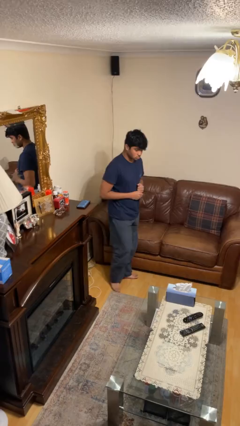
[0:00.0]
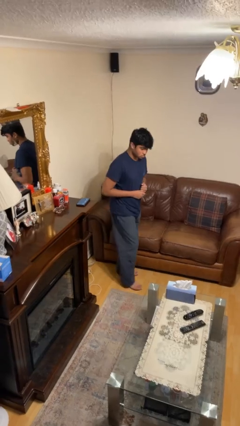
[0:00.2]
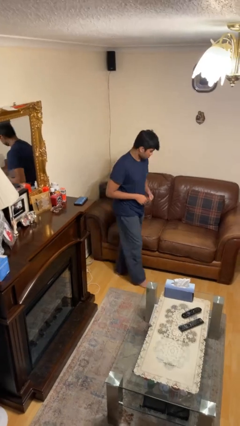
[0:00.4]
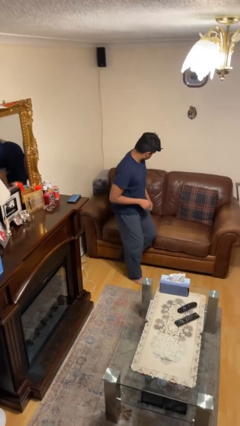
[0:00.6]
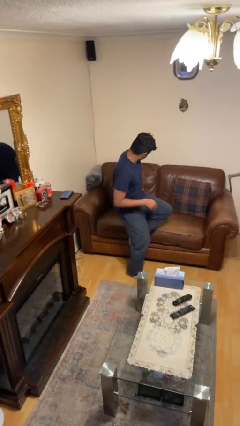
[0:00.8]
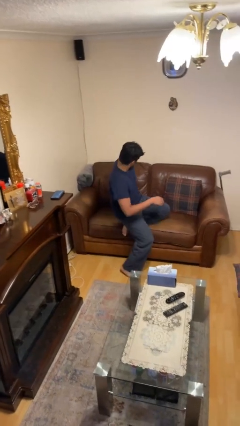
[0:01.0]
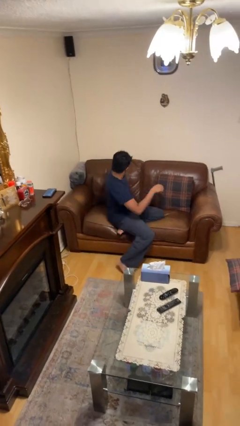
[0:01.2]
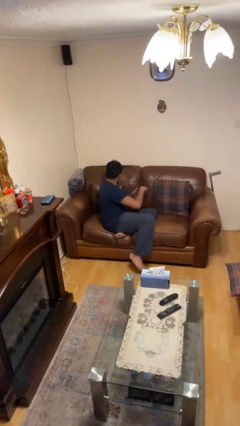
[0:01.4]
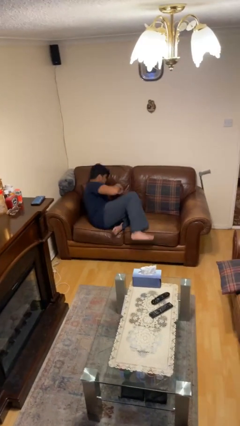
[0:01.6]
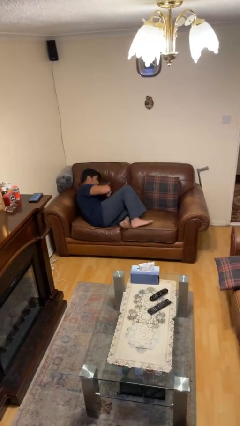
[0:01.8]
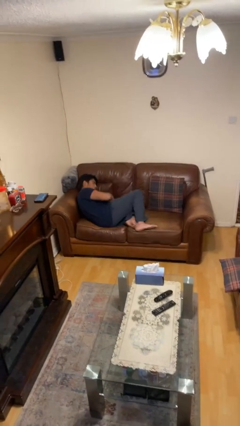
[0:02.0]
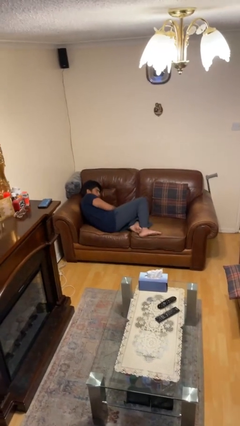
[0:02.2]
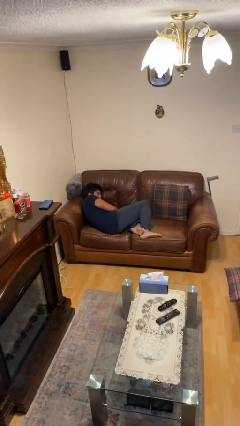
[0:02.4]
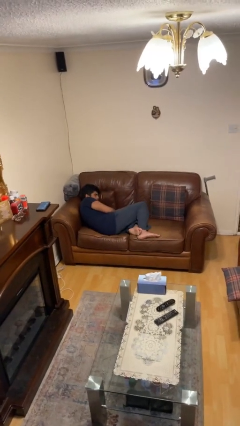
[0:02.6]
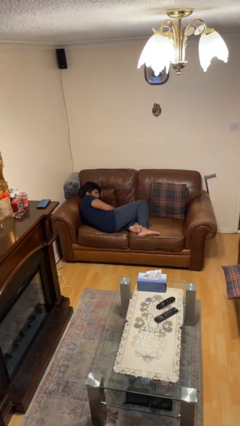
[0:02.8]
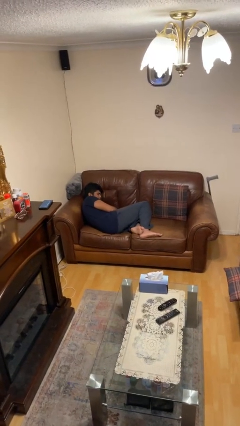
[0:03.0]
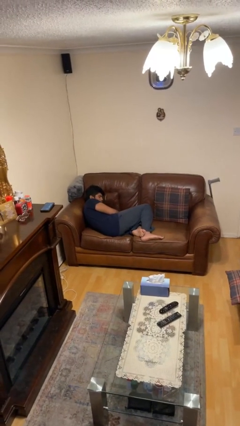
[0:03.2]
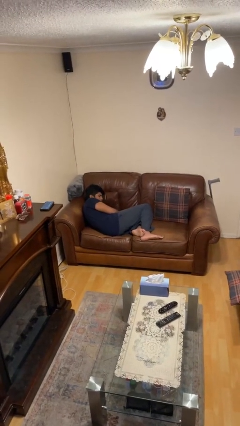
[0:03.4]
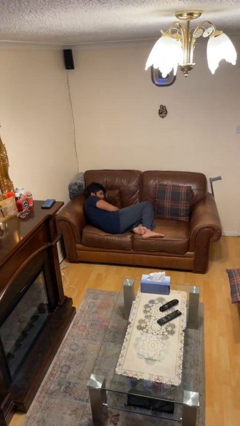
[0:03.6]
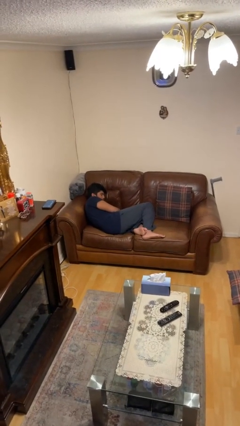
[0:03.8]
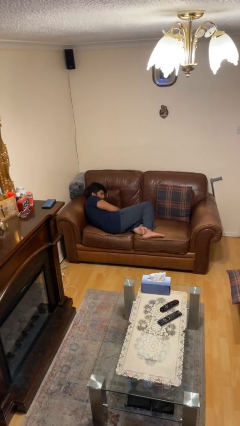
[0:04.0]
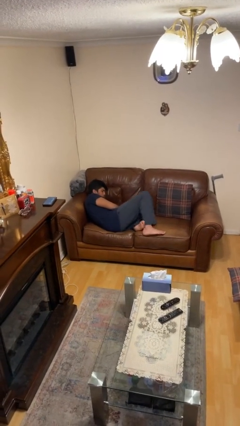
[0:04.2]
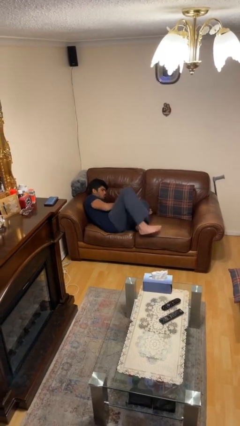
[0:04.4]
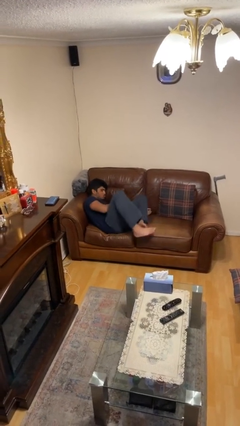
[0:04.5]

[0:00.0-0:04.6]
person lies down on couch

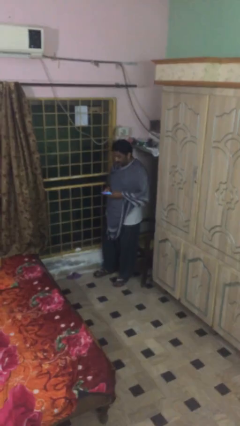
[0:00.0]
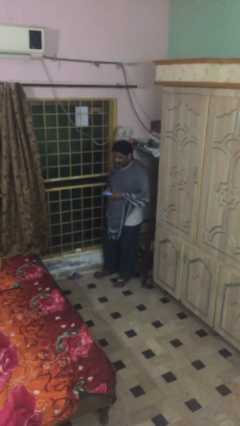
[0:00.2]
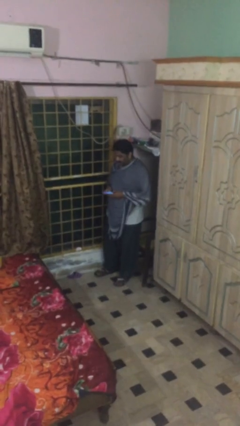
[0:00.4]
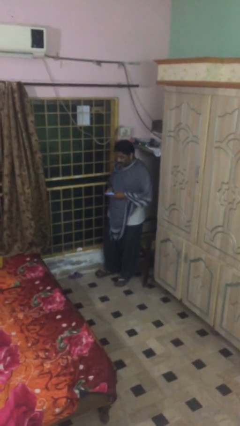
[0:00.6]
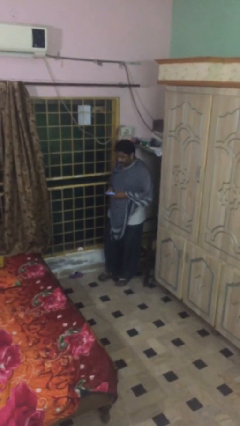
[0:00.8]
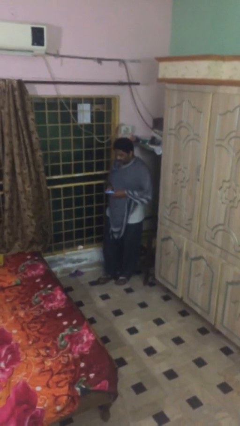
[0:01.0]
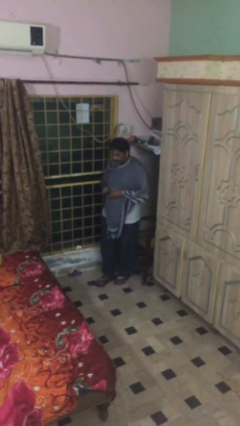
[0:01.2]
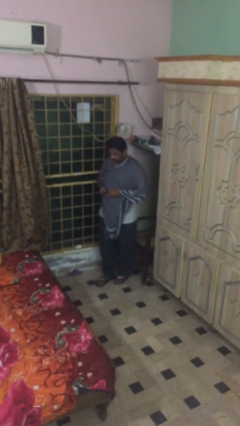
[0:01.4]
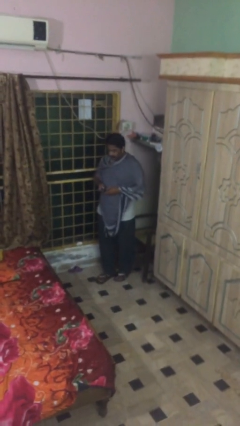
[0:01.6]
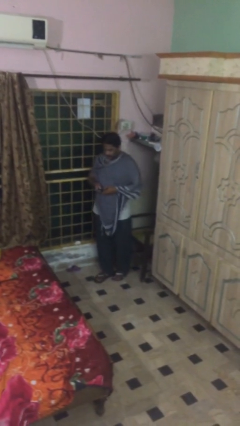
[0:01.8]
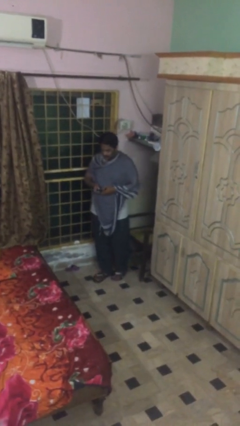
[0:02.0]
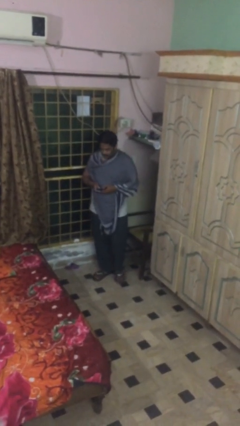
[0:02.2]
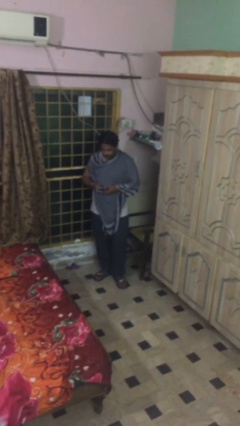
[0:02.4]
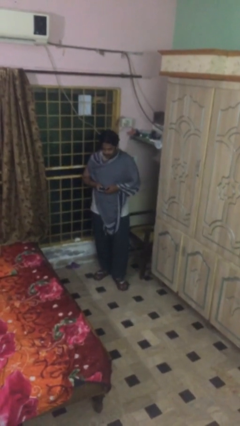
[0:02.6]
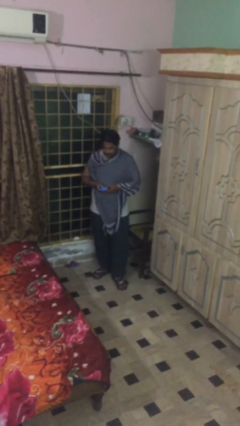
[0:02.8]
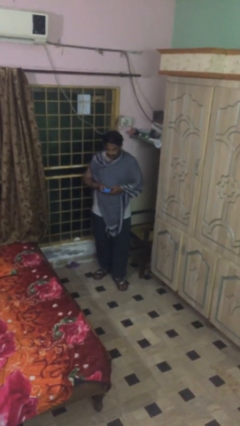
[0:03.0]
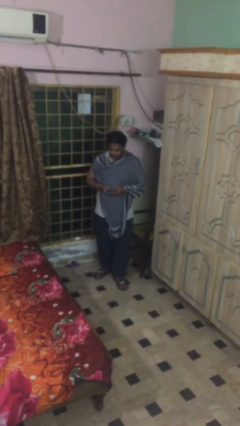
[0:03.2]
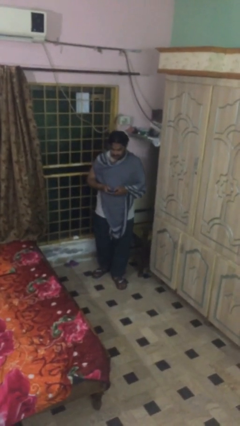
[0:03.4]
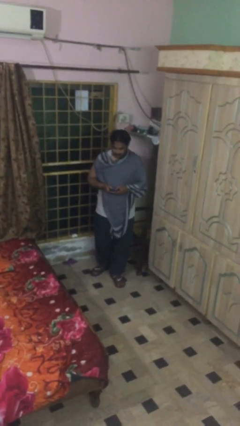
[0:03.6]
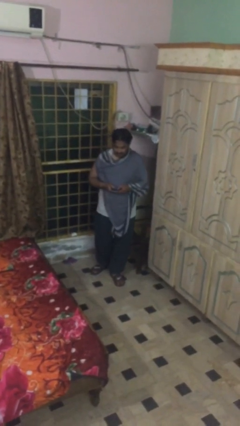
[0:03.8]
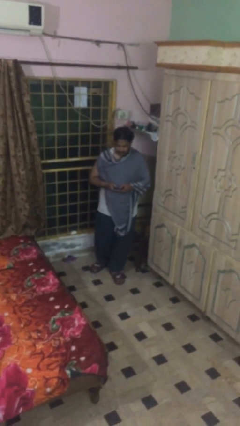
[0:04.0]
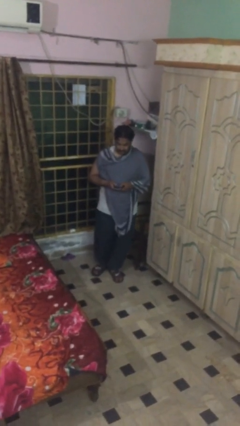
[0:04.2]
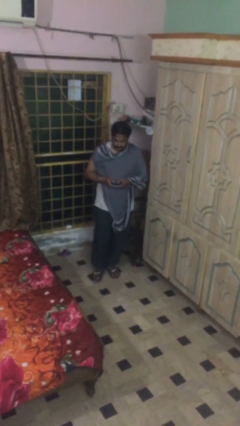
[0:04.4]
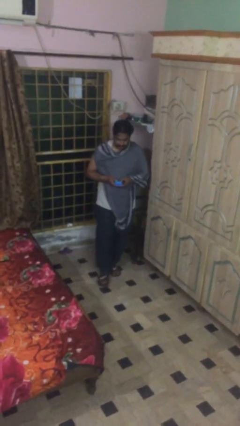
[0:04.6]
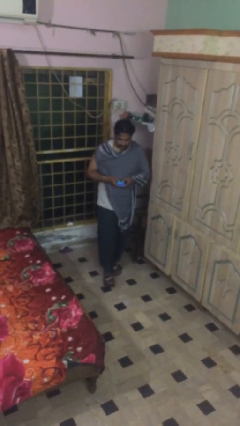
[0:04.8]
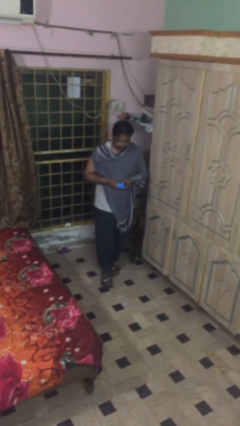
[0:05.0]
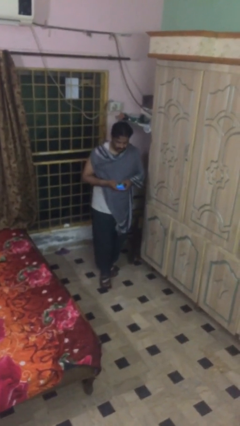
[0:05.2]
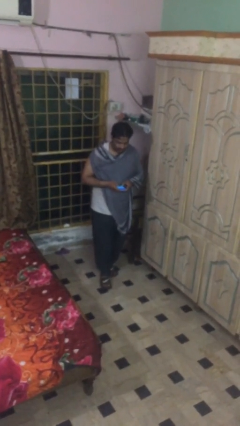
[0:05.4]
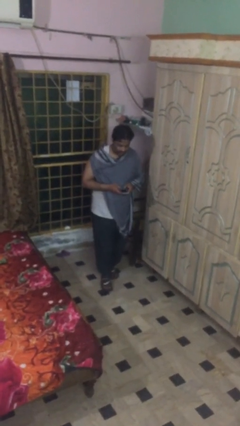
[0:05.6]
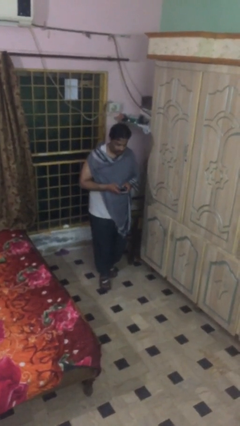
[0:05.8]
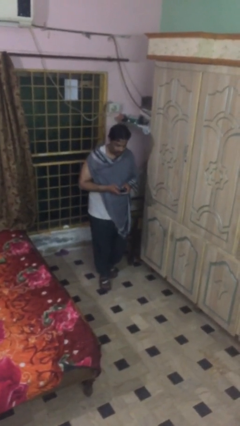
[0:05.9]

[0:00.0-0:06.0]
person texts on phone

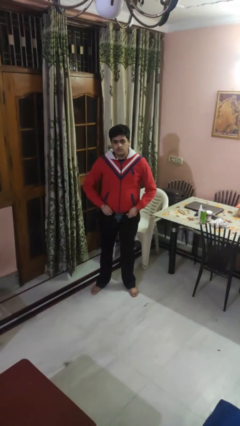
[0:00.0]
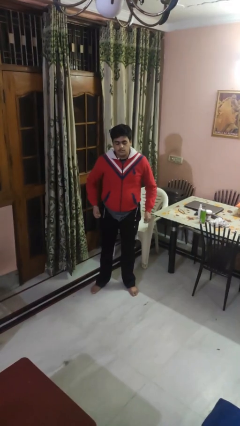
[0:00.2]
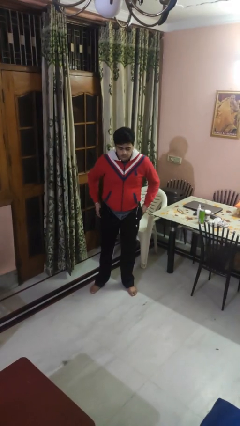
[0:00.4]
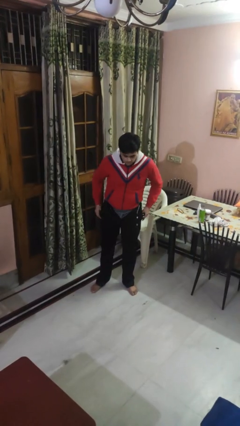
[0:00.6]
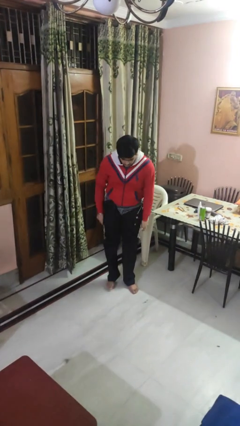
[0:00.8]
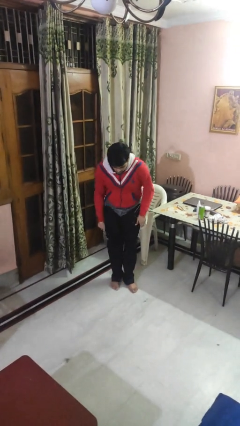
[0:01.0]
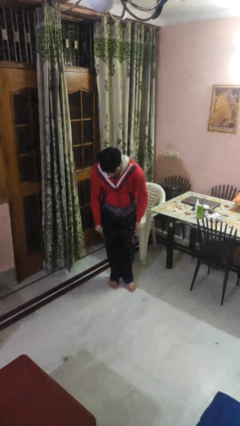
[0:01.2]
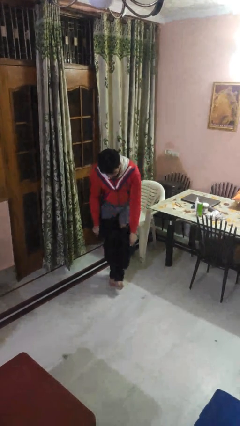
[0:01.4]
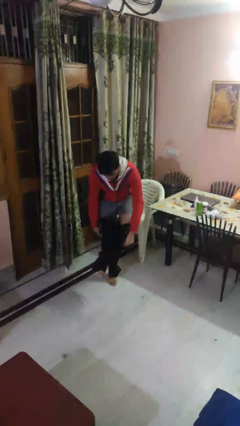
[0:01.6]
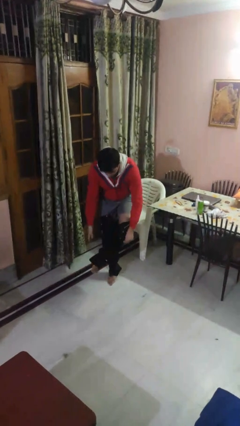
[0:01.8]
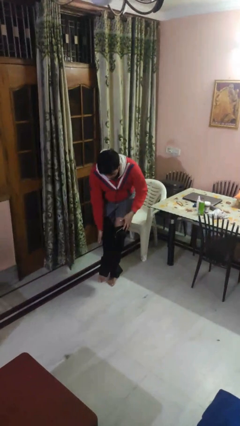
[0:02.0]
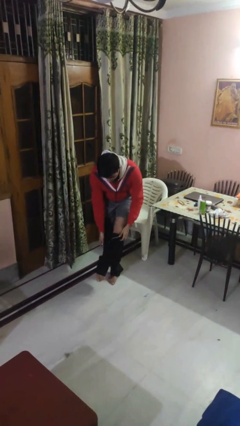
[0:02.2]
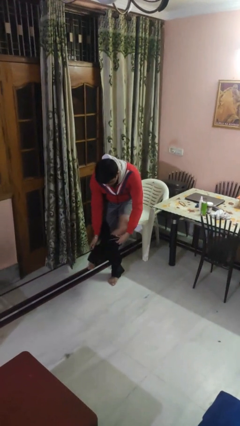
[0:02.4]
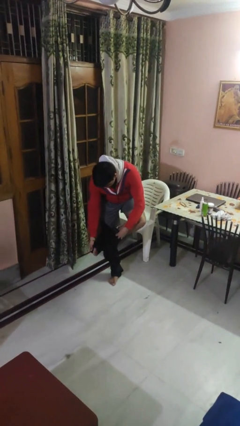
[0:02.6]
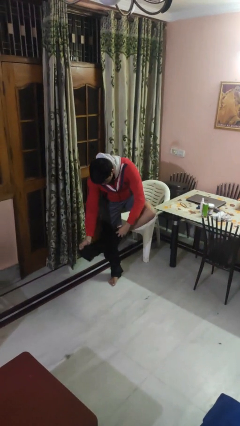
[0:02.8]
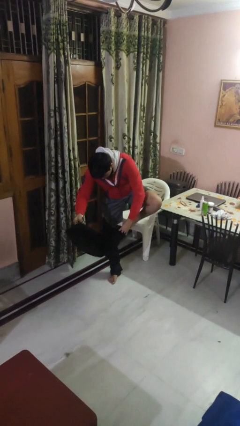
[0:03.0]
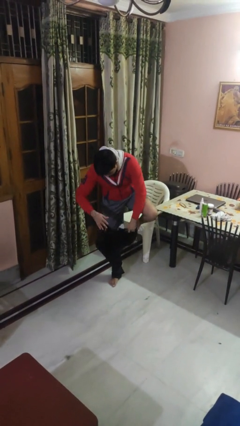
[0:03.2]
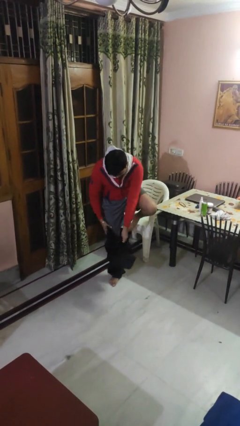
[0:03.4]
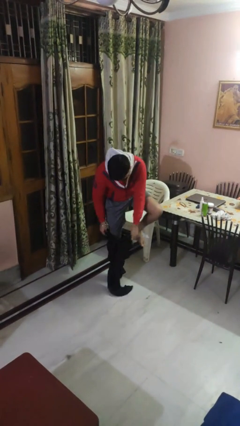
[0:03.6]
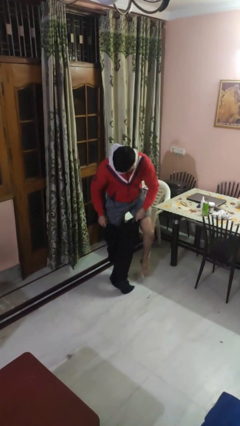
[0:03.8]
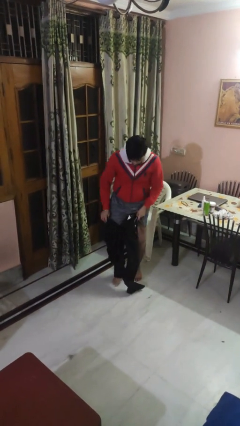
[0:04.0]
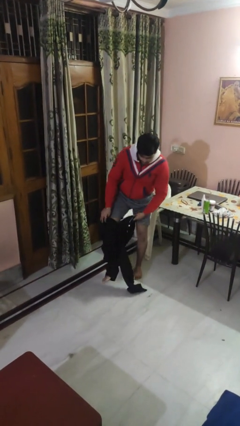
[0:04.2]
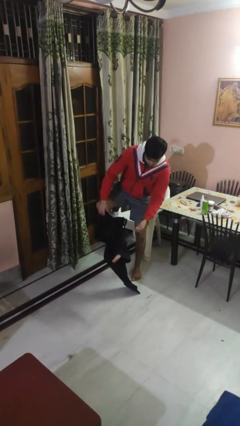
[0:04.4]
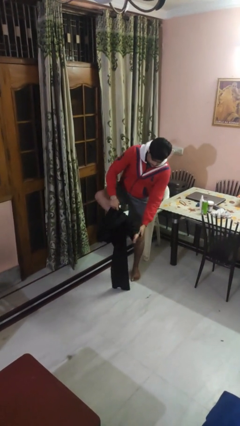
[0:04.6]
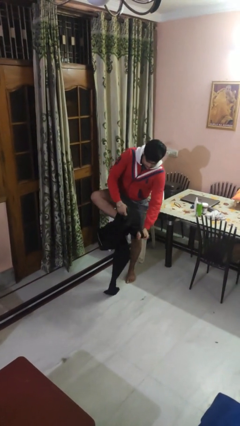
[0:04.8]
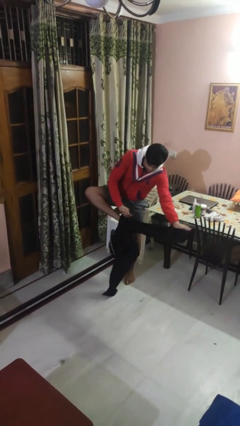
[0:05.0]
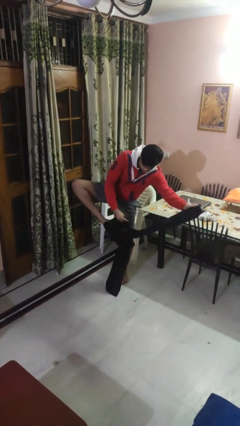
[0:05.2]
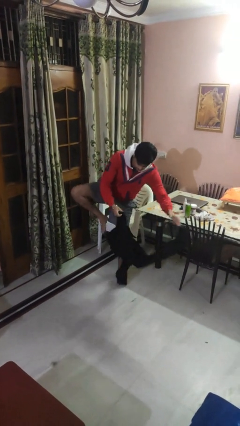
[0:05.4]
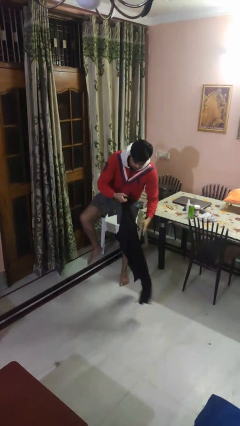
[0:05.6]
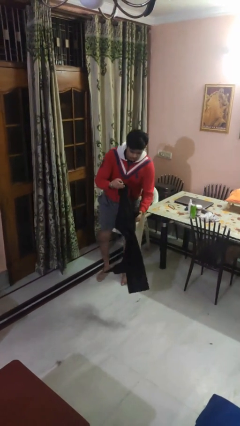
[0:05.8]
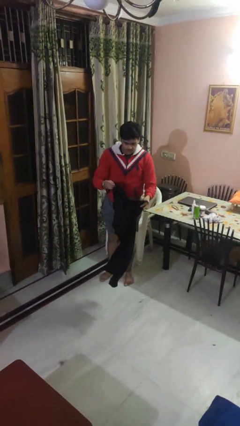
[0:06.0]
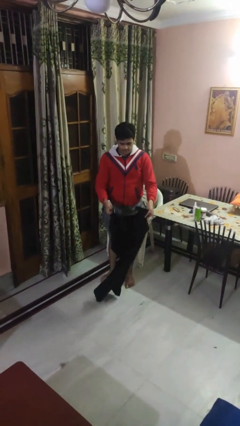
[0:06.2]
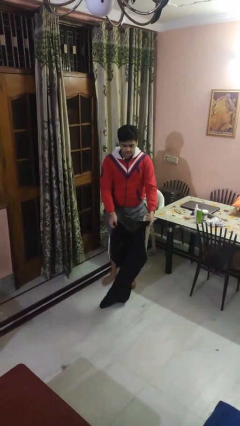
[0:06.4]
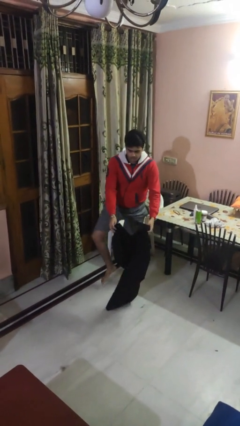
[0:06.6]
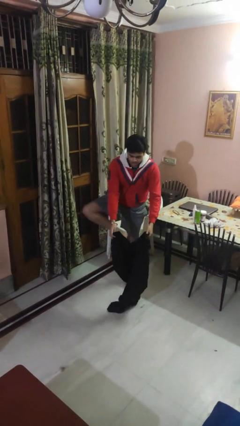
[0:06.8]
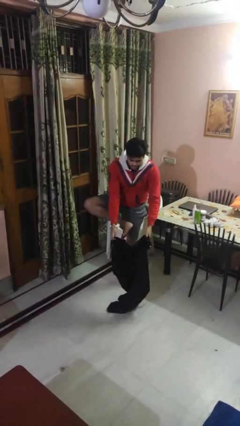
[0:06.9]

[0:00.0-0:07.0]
person takes off pants

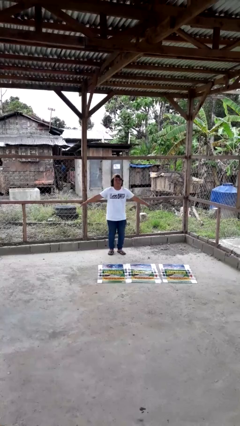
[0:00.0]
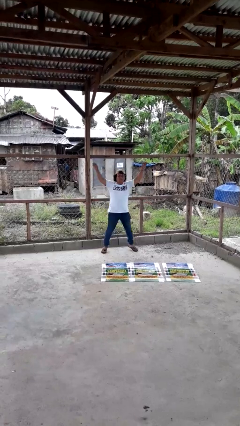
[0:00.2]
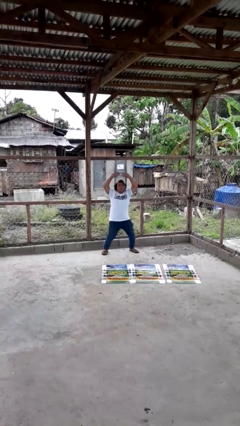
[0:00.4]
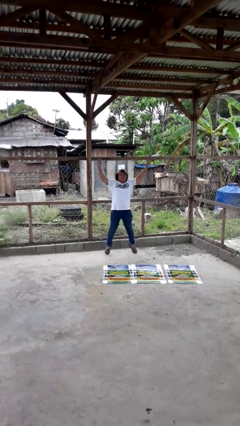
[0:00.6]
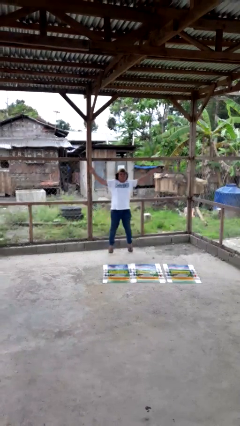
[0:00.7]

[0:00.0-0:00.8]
person exercises with jumping jacks
